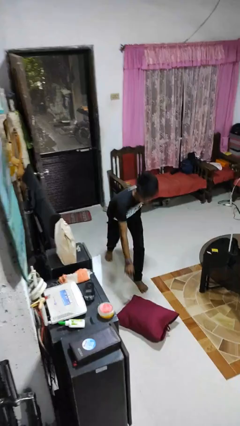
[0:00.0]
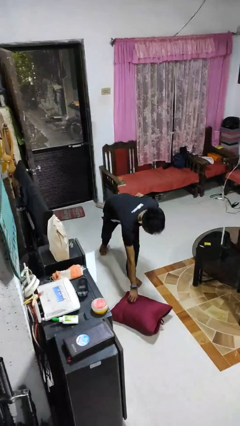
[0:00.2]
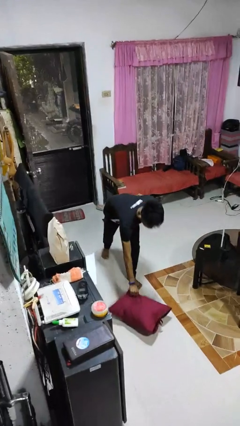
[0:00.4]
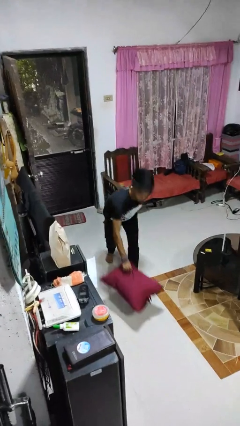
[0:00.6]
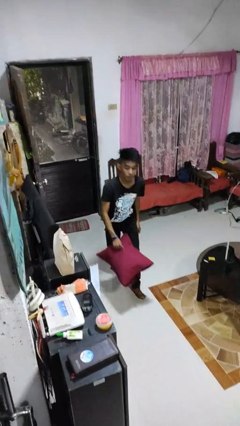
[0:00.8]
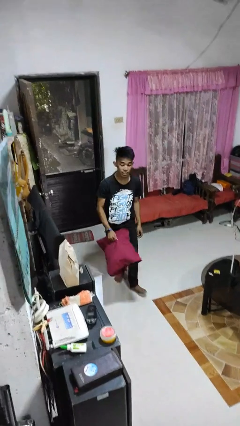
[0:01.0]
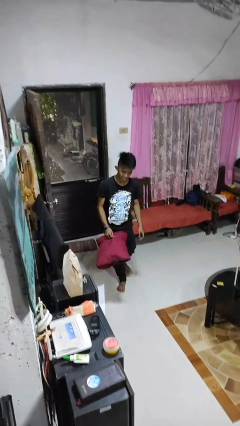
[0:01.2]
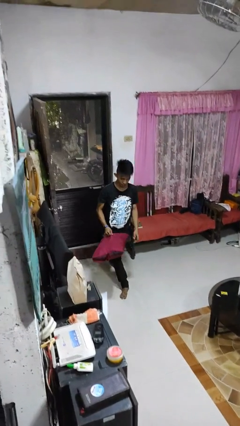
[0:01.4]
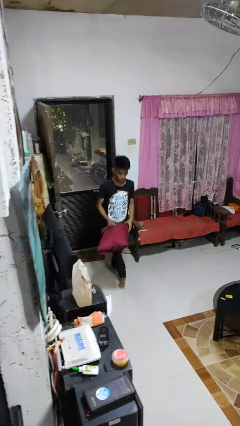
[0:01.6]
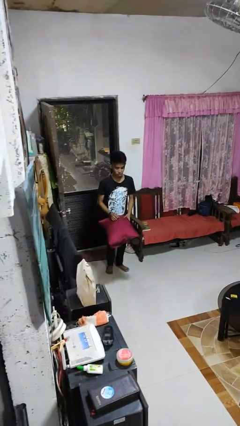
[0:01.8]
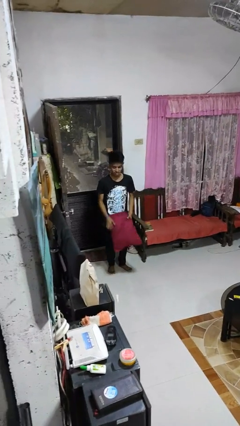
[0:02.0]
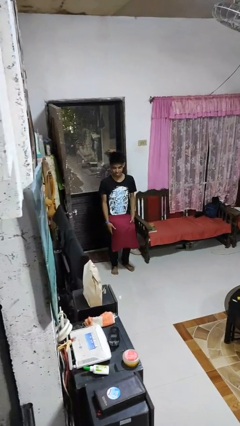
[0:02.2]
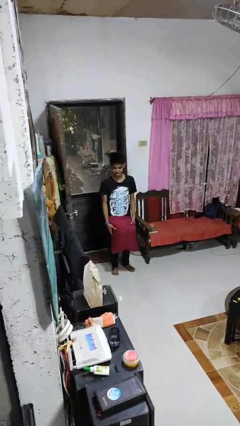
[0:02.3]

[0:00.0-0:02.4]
person picks up object from floor

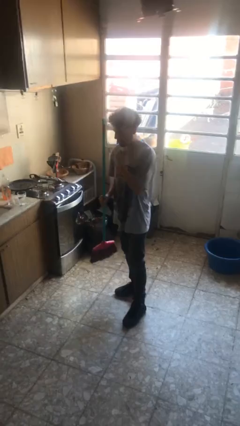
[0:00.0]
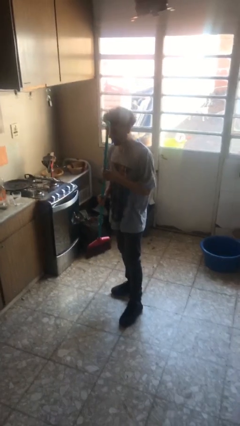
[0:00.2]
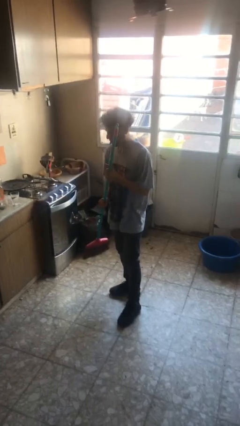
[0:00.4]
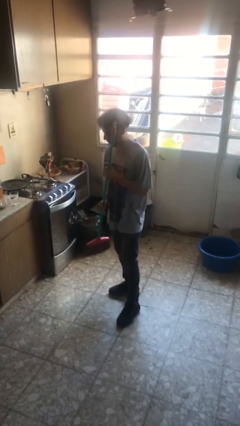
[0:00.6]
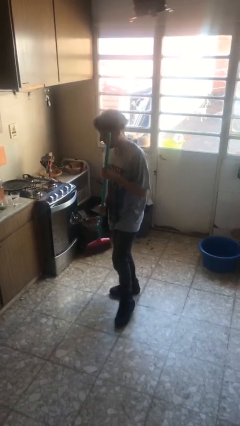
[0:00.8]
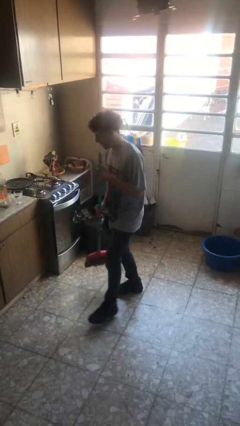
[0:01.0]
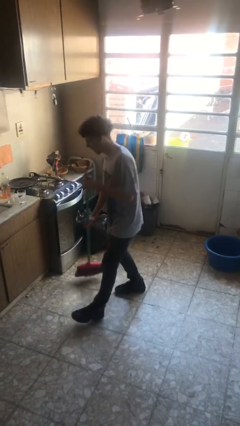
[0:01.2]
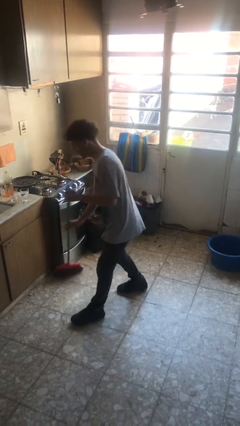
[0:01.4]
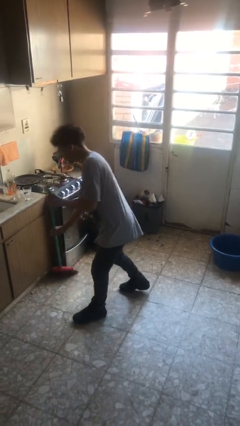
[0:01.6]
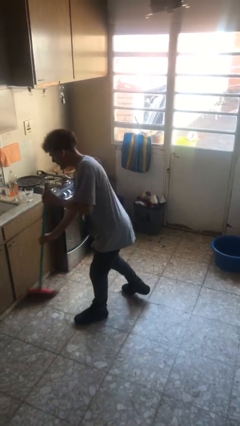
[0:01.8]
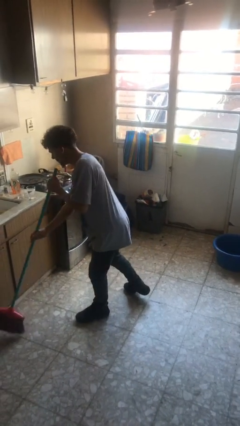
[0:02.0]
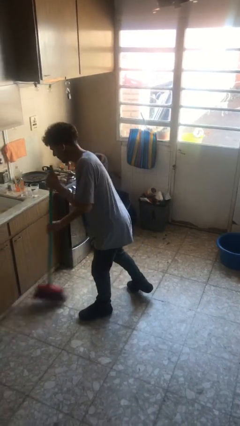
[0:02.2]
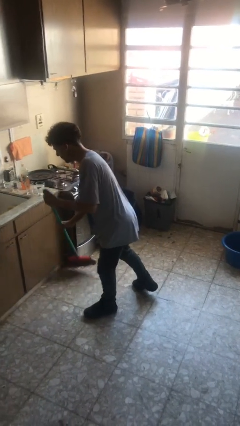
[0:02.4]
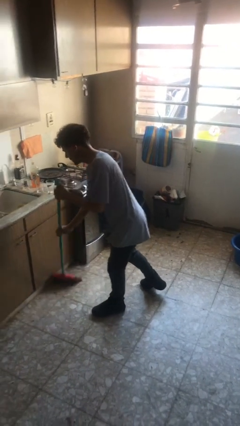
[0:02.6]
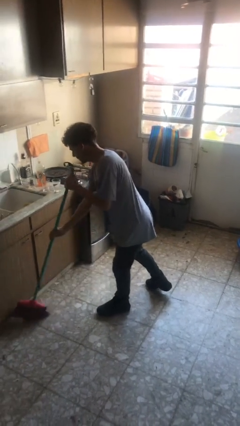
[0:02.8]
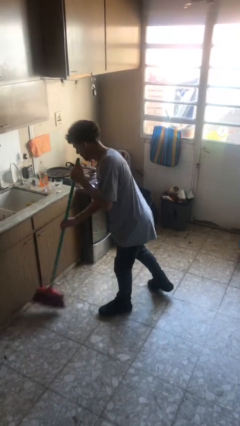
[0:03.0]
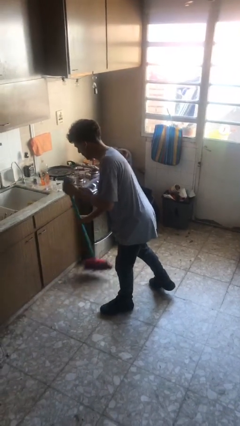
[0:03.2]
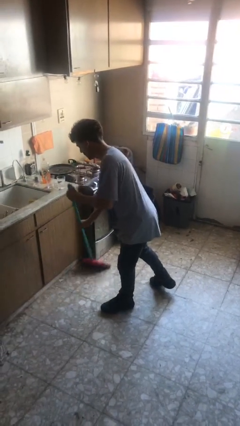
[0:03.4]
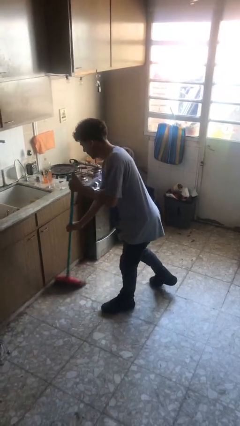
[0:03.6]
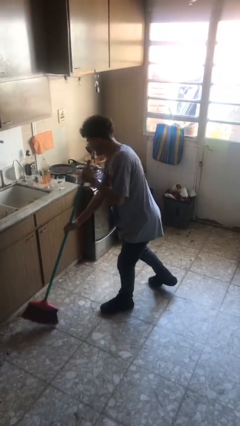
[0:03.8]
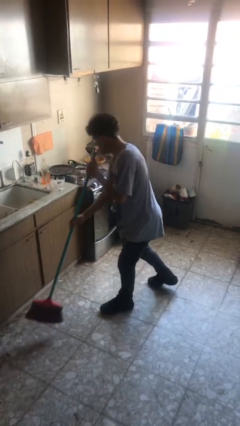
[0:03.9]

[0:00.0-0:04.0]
person sweeps floor

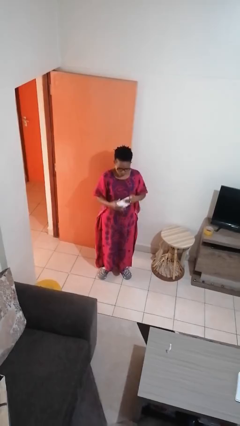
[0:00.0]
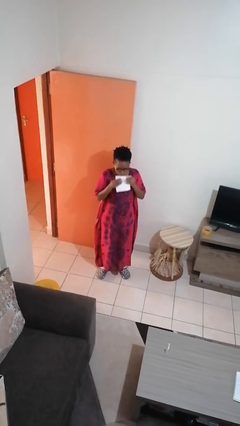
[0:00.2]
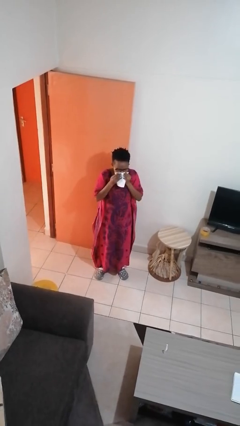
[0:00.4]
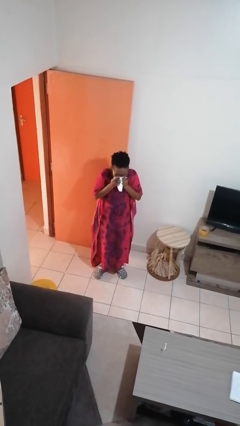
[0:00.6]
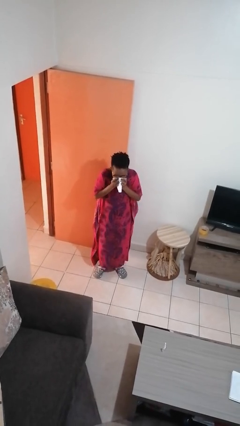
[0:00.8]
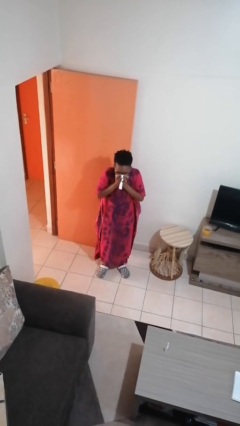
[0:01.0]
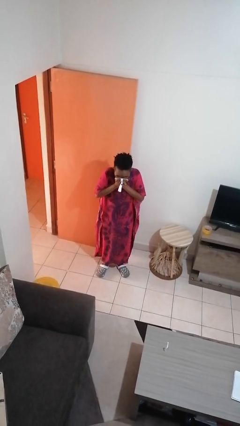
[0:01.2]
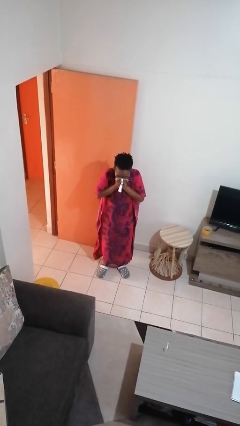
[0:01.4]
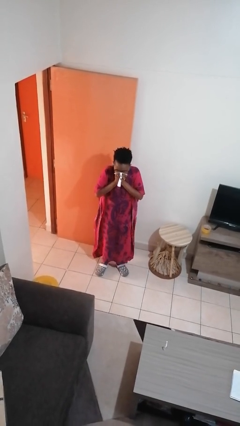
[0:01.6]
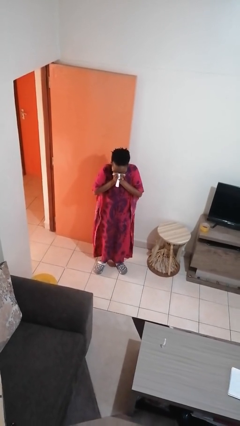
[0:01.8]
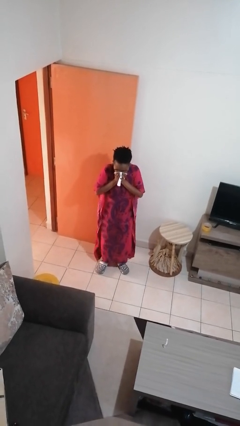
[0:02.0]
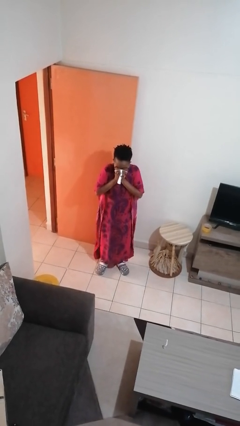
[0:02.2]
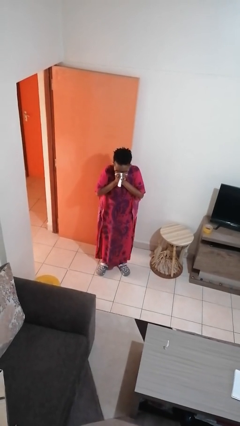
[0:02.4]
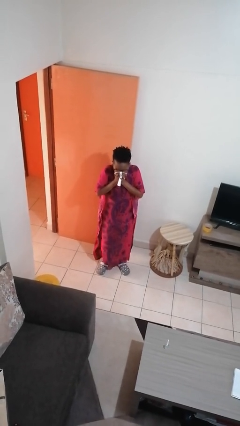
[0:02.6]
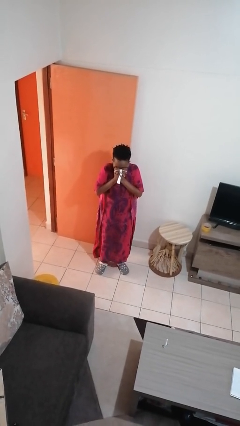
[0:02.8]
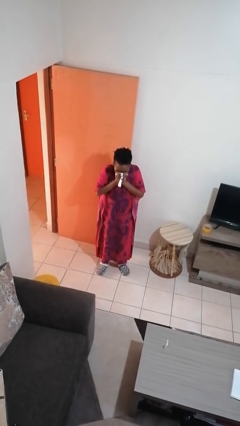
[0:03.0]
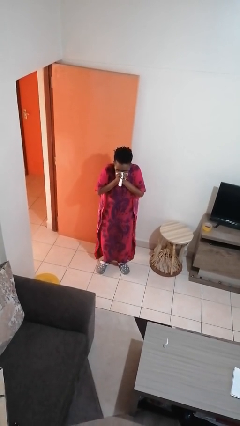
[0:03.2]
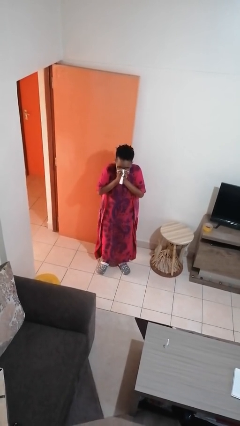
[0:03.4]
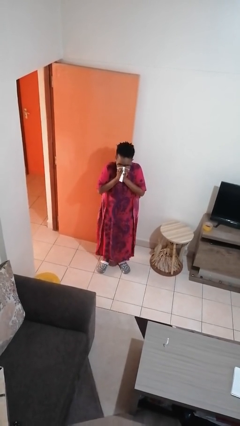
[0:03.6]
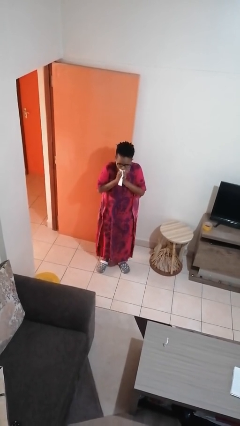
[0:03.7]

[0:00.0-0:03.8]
person blows nose

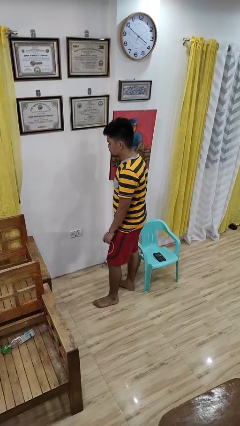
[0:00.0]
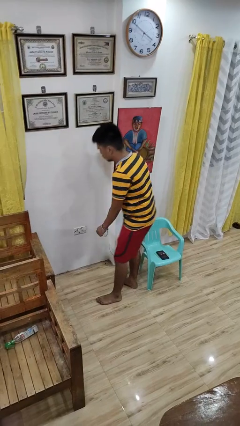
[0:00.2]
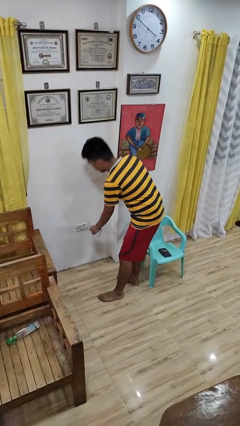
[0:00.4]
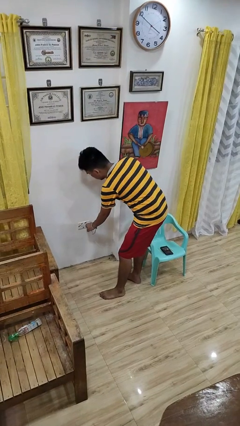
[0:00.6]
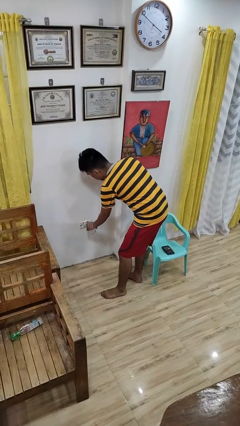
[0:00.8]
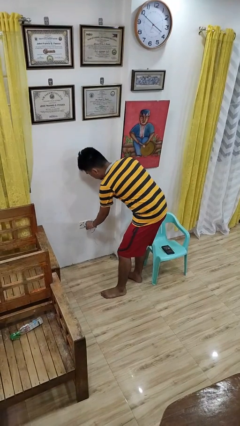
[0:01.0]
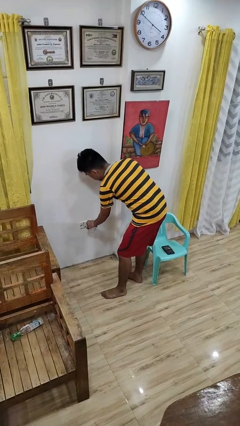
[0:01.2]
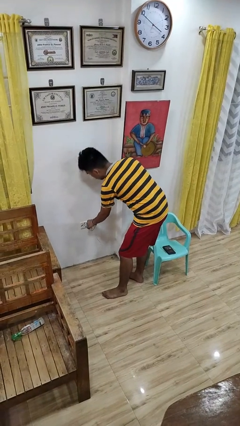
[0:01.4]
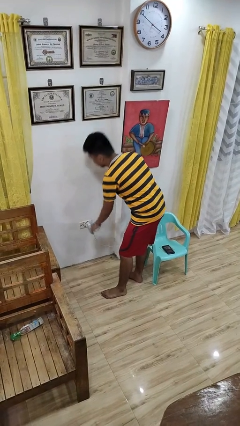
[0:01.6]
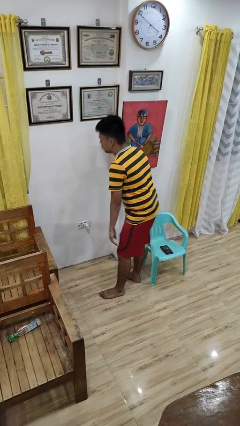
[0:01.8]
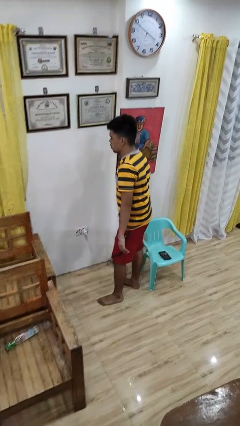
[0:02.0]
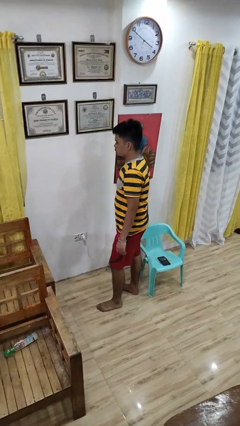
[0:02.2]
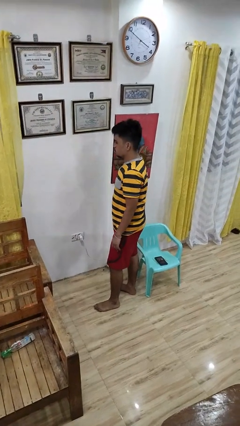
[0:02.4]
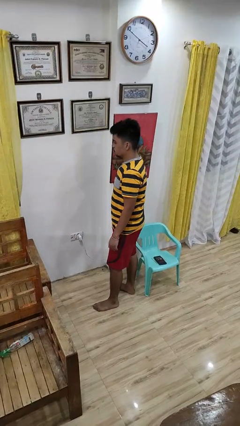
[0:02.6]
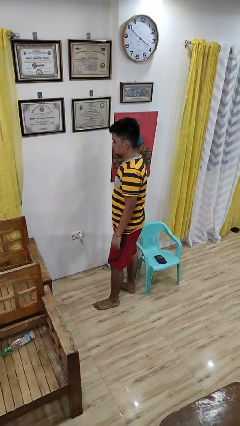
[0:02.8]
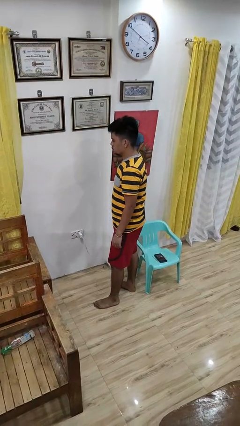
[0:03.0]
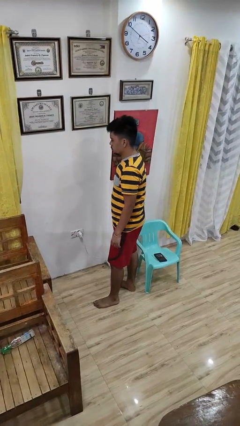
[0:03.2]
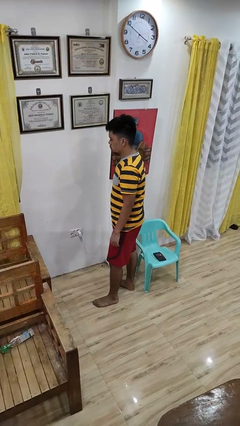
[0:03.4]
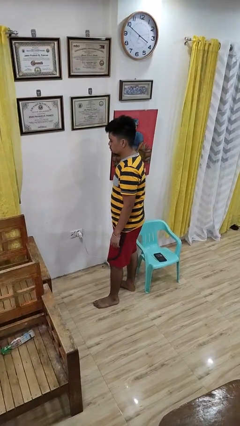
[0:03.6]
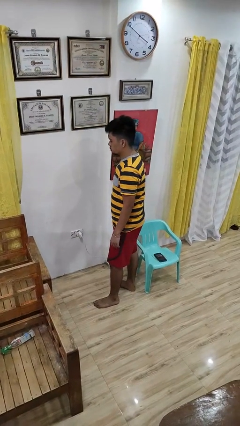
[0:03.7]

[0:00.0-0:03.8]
person plugs into electrical socket

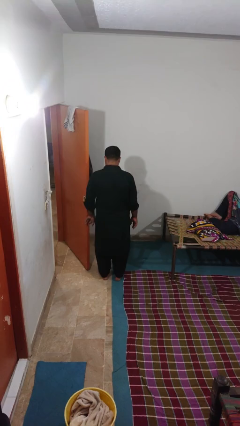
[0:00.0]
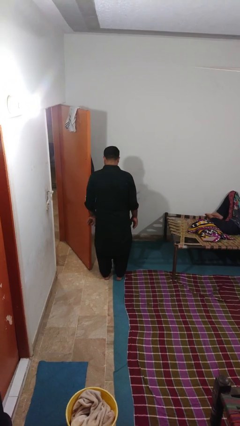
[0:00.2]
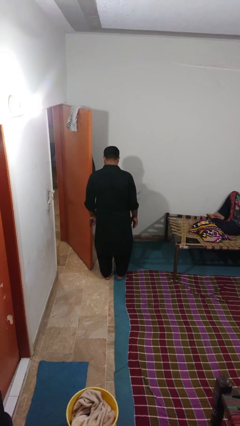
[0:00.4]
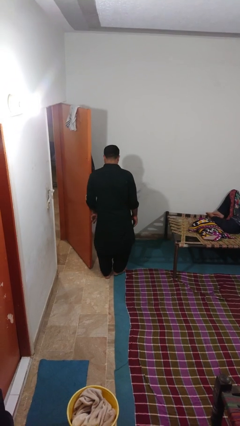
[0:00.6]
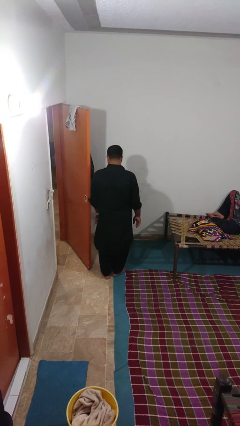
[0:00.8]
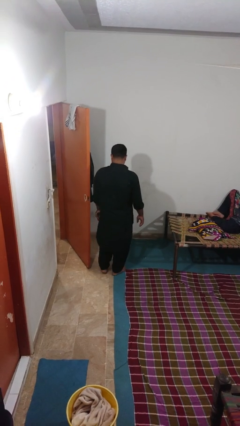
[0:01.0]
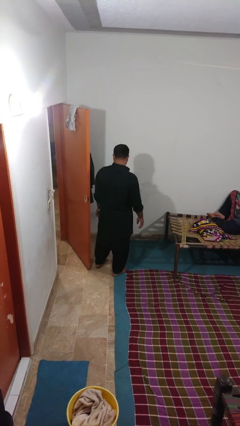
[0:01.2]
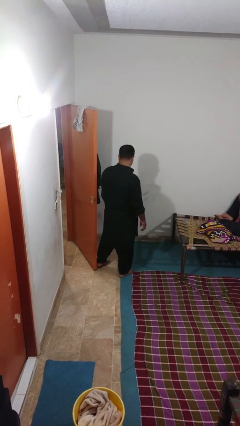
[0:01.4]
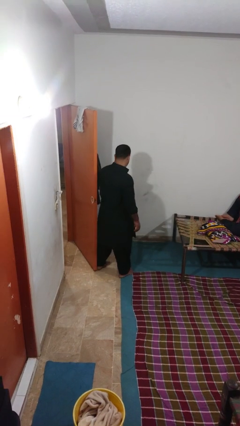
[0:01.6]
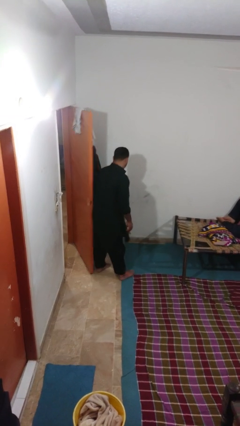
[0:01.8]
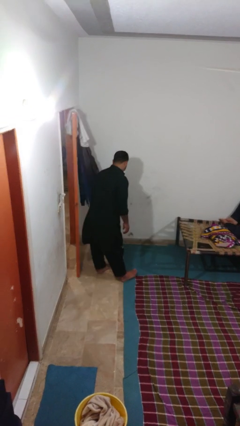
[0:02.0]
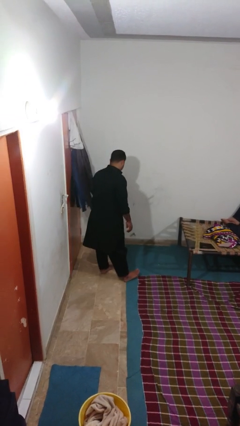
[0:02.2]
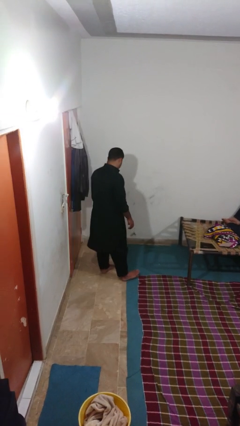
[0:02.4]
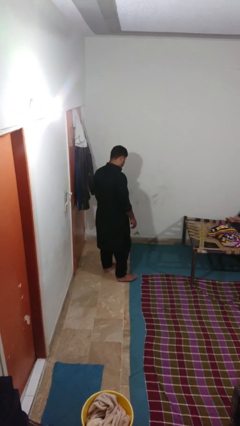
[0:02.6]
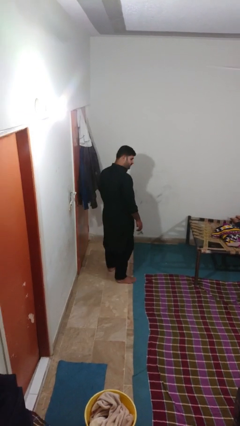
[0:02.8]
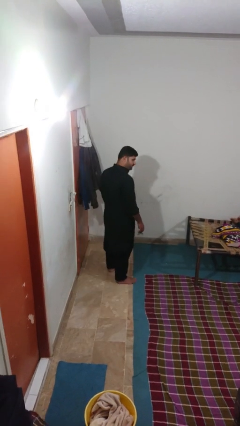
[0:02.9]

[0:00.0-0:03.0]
person closes door with hip

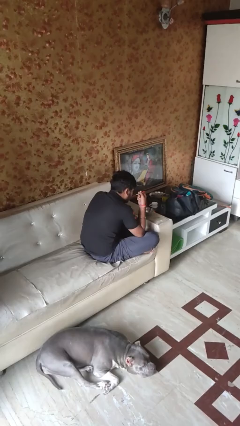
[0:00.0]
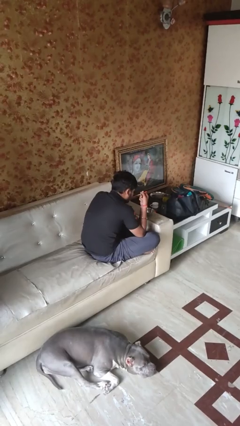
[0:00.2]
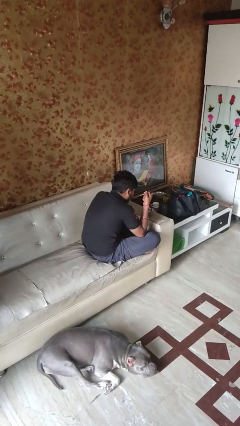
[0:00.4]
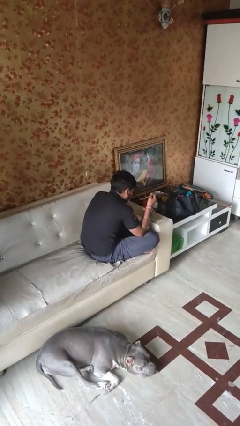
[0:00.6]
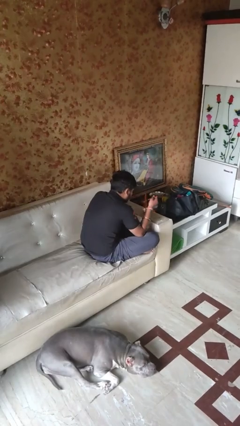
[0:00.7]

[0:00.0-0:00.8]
person eats with utensil
